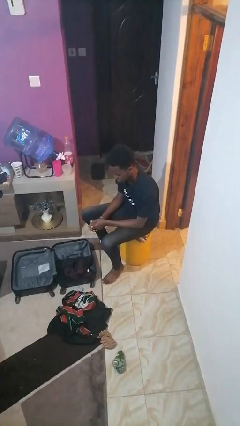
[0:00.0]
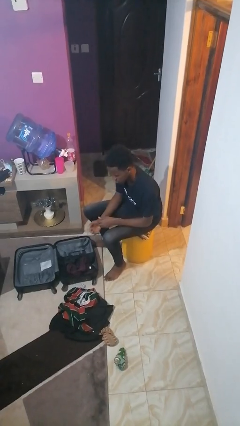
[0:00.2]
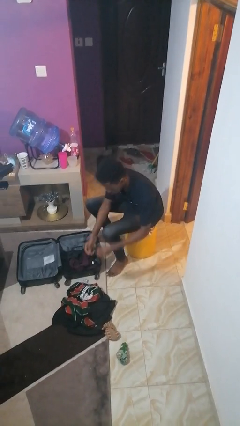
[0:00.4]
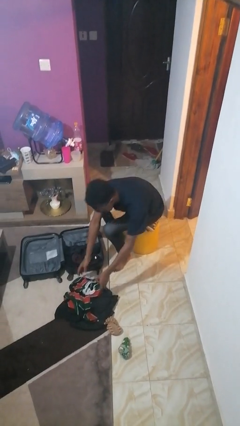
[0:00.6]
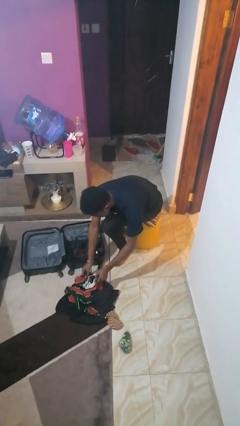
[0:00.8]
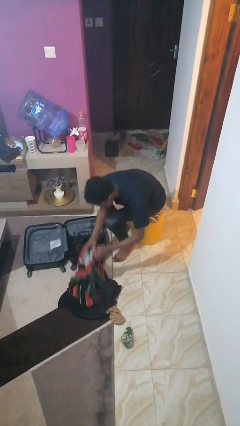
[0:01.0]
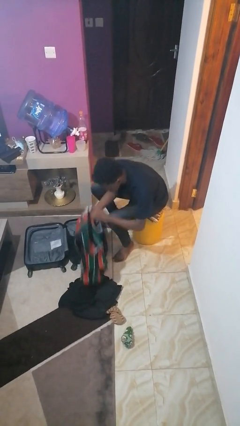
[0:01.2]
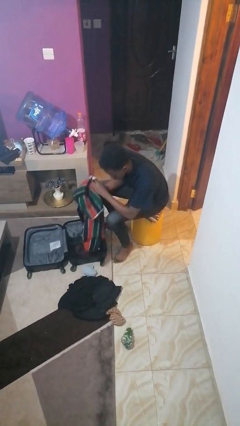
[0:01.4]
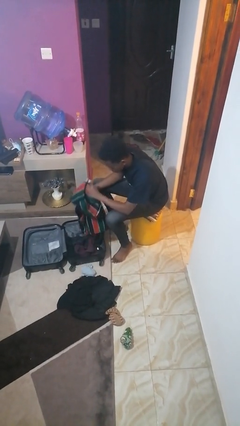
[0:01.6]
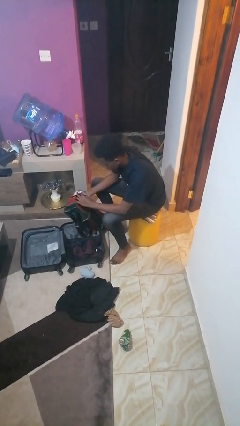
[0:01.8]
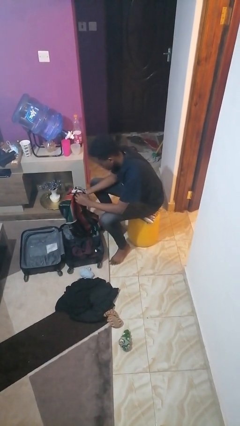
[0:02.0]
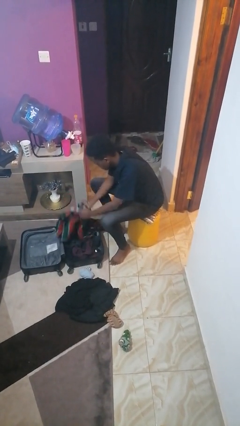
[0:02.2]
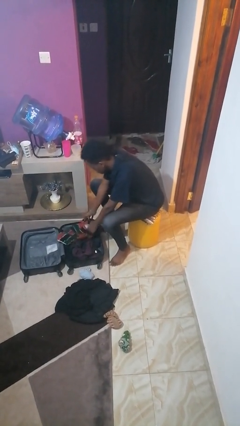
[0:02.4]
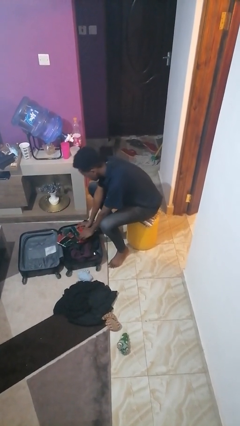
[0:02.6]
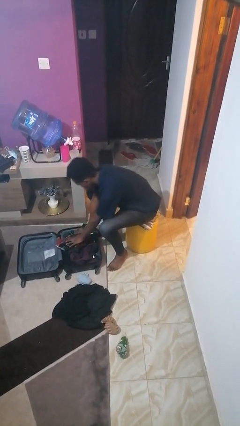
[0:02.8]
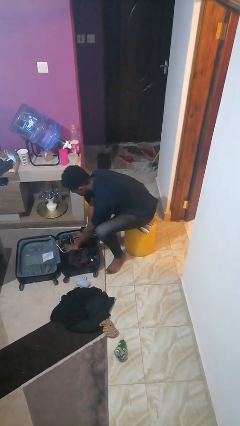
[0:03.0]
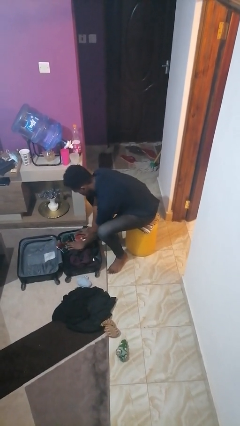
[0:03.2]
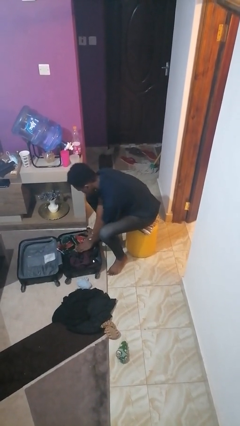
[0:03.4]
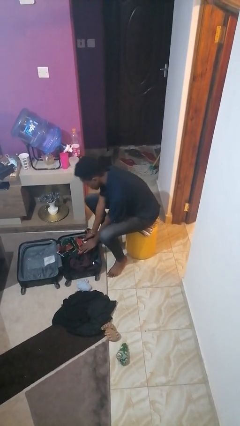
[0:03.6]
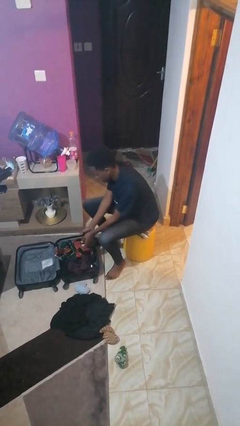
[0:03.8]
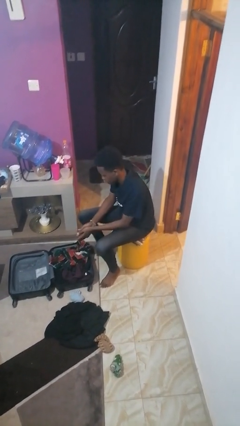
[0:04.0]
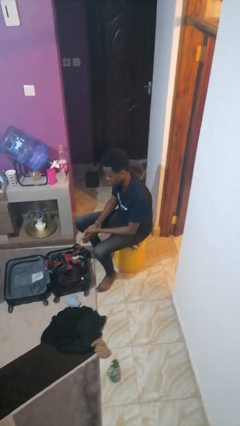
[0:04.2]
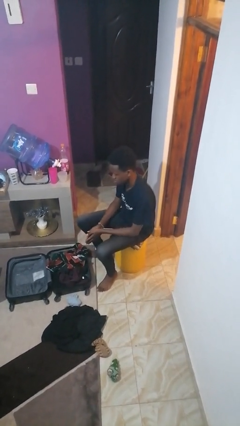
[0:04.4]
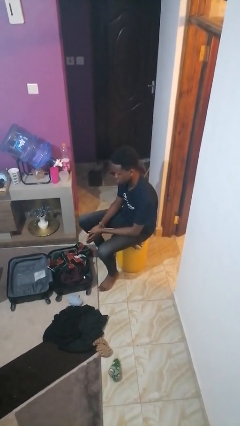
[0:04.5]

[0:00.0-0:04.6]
person loads clothes into suitcase

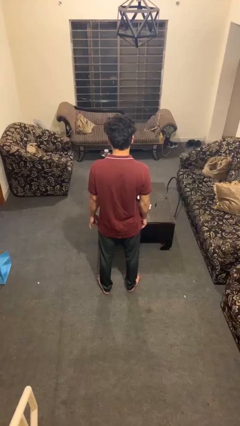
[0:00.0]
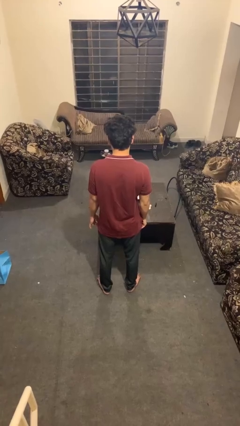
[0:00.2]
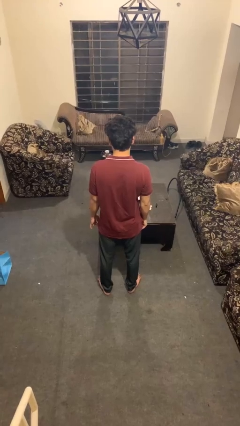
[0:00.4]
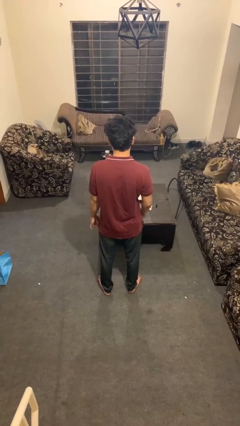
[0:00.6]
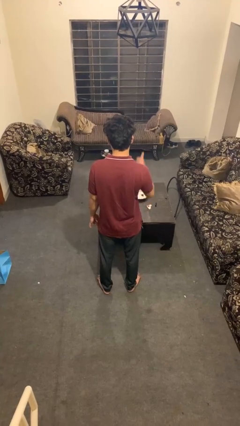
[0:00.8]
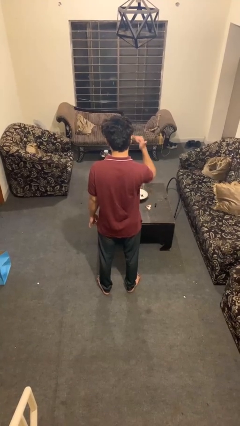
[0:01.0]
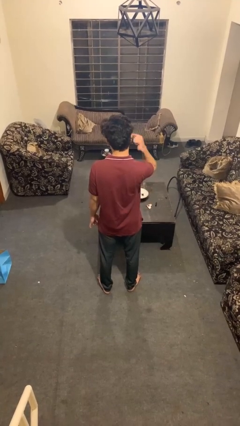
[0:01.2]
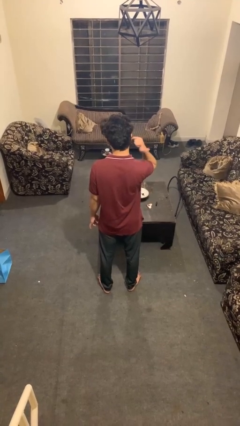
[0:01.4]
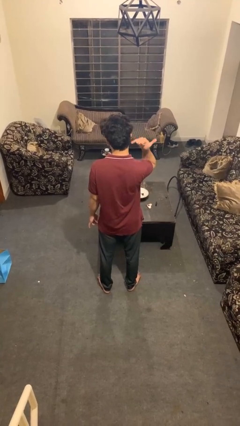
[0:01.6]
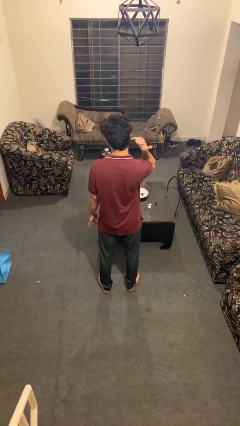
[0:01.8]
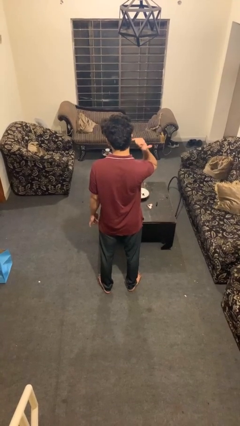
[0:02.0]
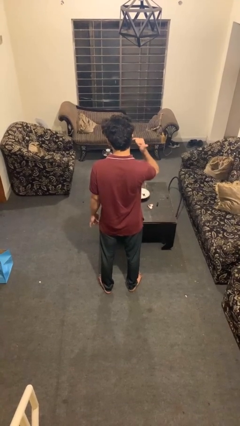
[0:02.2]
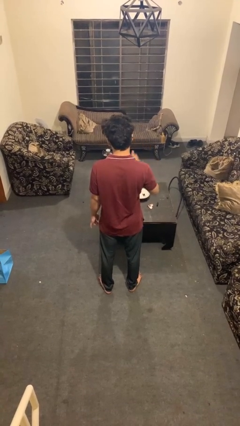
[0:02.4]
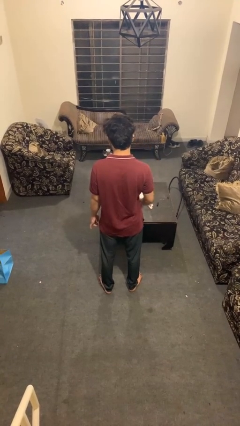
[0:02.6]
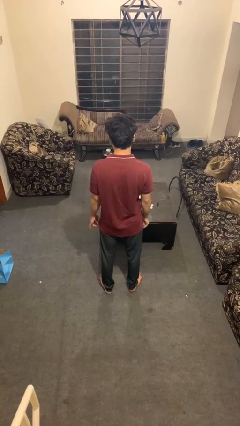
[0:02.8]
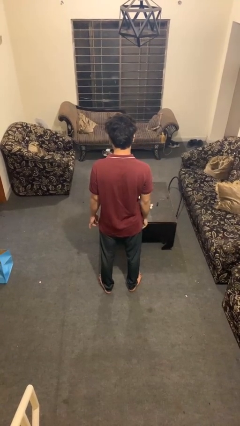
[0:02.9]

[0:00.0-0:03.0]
person gestures hang loose

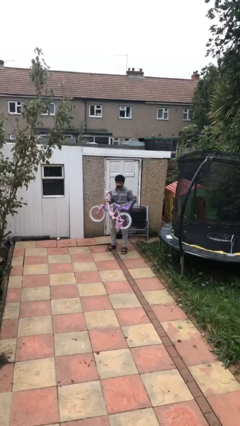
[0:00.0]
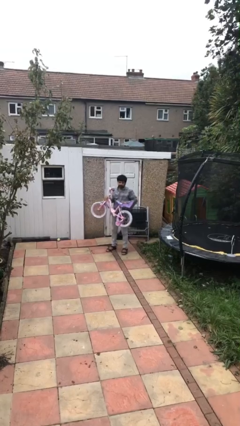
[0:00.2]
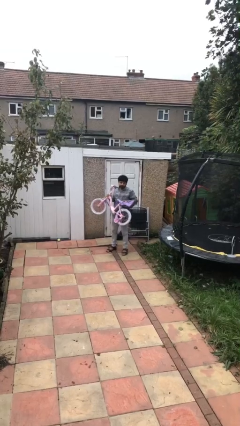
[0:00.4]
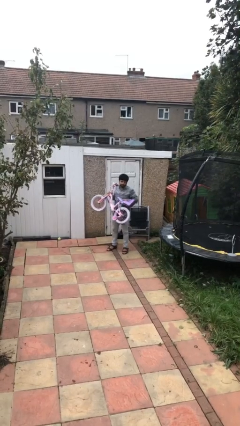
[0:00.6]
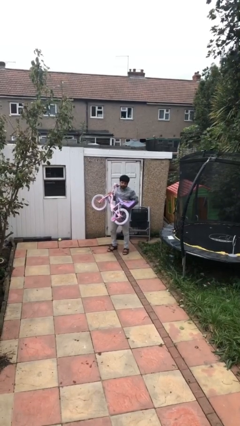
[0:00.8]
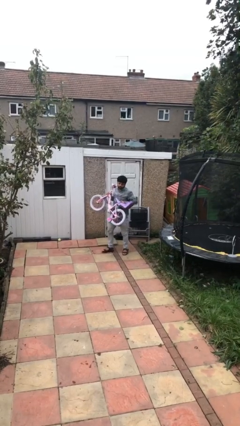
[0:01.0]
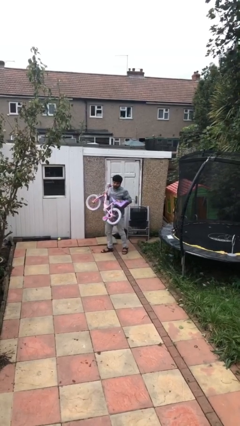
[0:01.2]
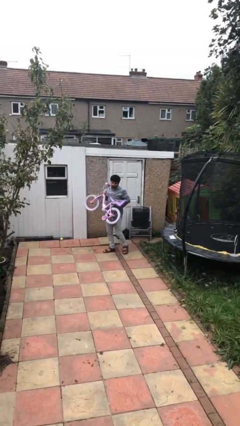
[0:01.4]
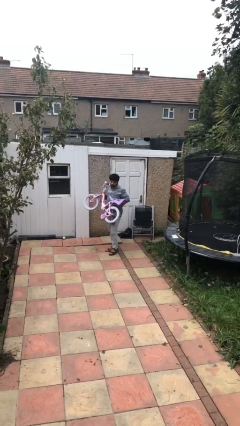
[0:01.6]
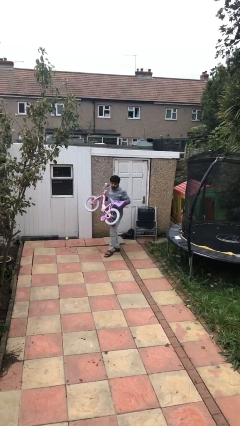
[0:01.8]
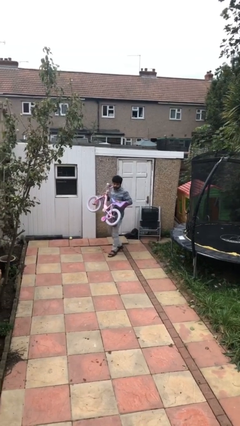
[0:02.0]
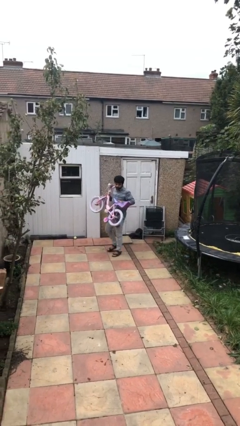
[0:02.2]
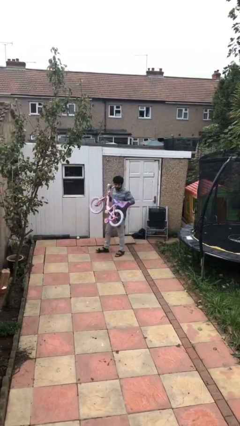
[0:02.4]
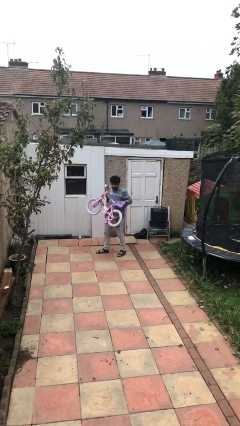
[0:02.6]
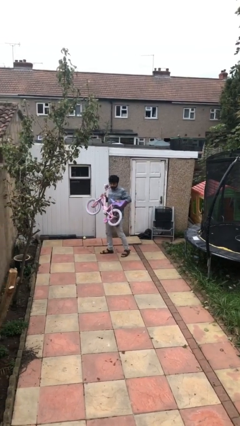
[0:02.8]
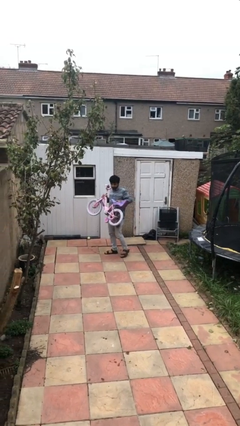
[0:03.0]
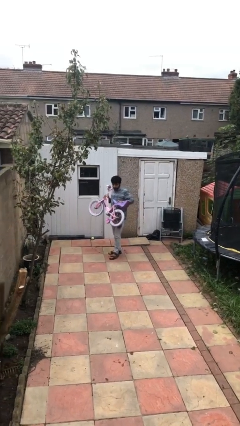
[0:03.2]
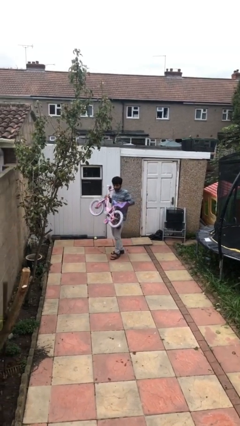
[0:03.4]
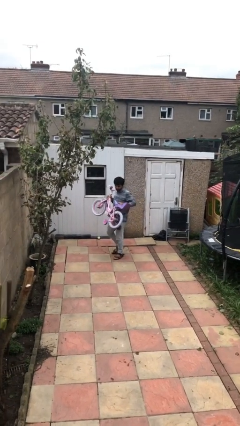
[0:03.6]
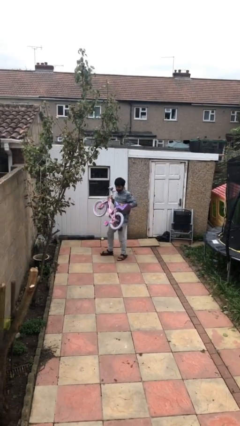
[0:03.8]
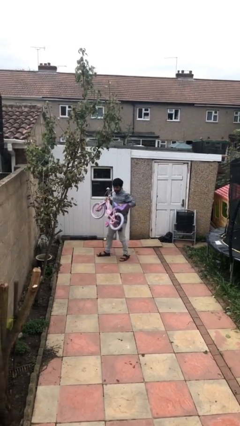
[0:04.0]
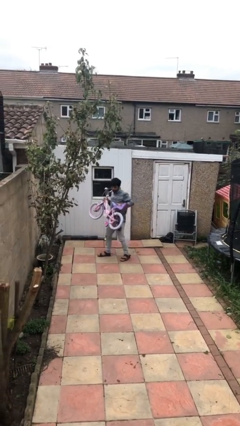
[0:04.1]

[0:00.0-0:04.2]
person carries heavy object

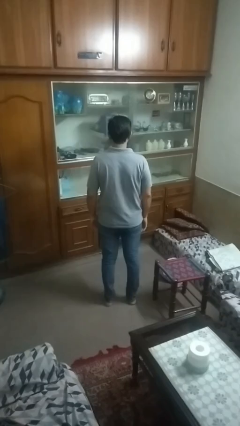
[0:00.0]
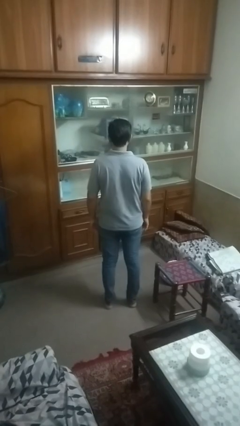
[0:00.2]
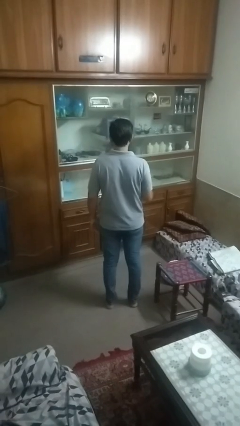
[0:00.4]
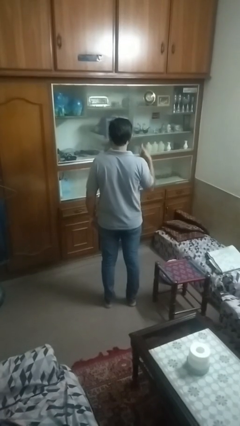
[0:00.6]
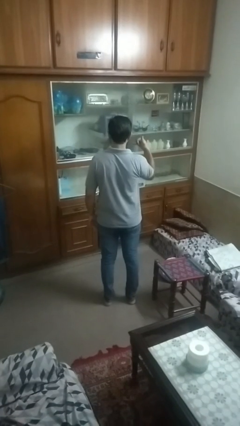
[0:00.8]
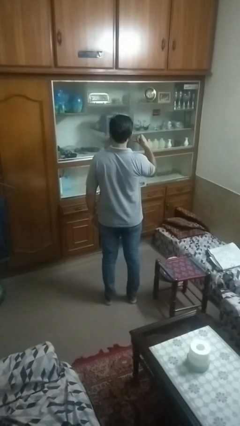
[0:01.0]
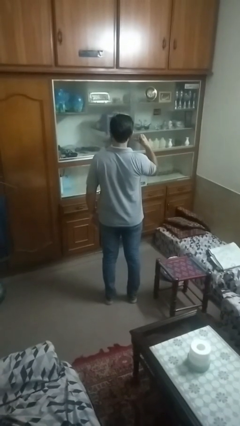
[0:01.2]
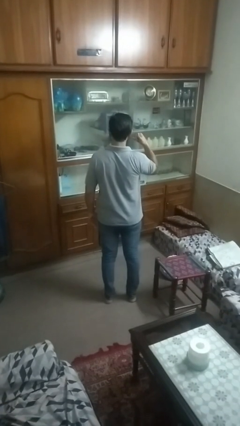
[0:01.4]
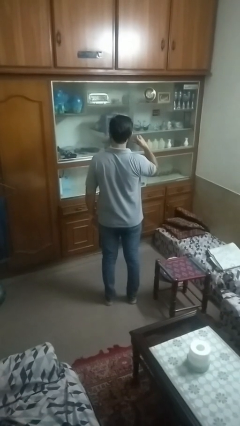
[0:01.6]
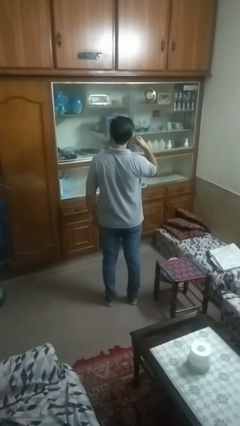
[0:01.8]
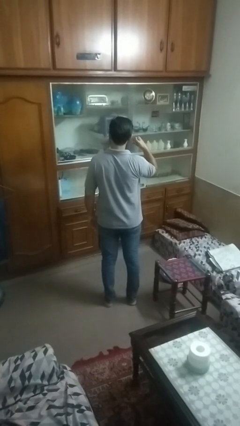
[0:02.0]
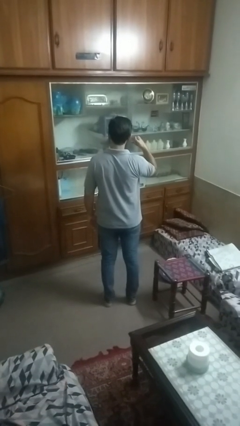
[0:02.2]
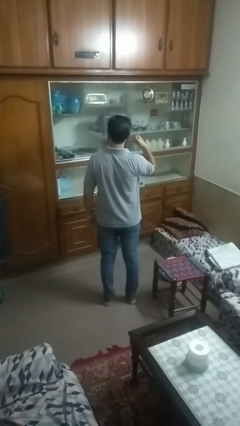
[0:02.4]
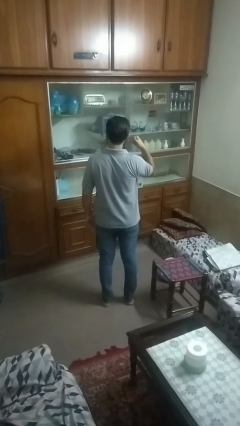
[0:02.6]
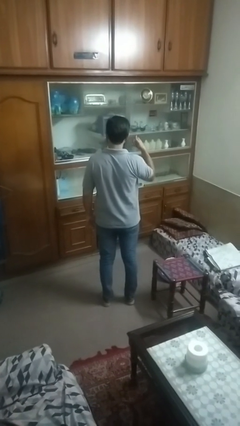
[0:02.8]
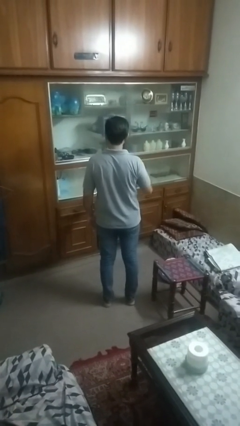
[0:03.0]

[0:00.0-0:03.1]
person gestures call me

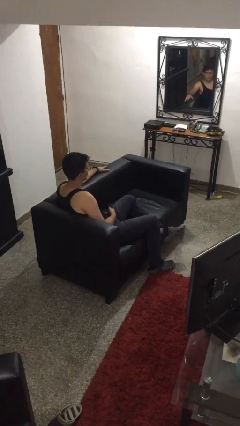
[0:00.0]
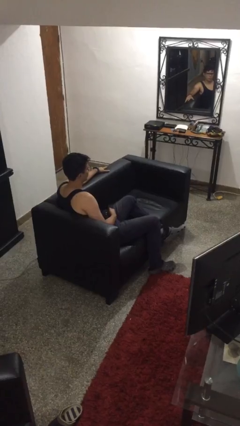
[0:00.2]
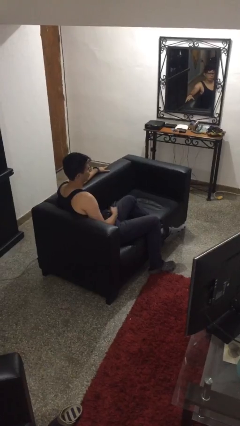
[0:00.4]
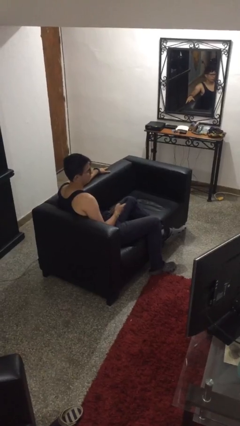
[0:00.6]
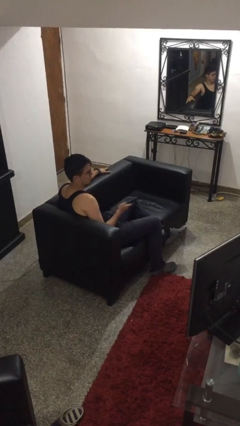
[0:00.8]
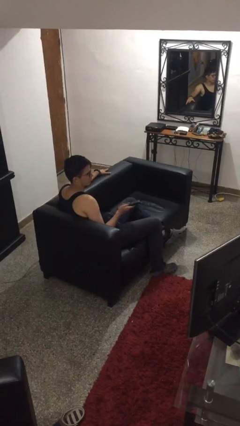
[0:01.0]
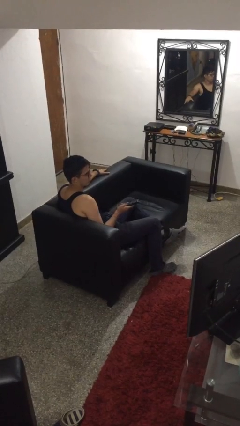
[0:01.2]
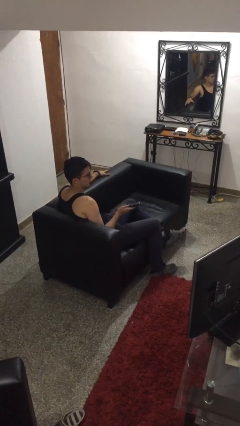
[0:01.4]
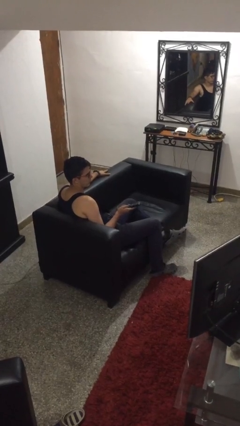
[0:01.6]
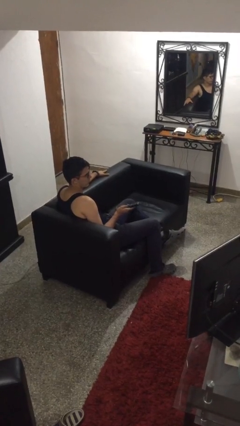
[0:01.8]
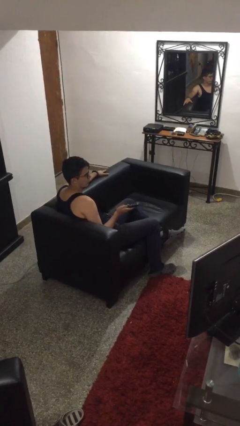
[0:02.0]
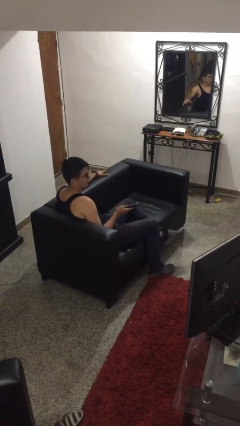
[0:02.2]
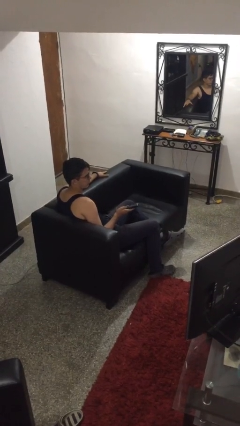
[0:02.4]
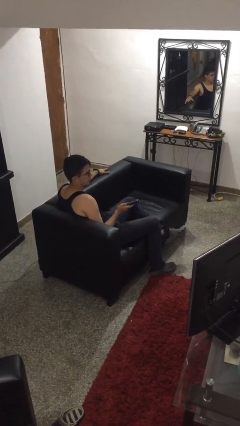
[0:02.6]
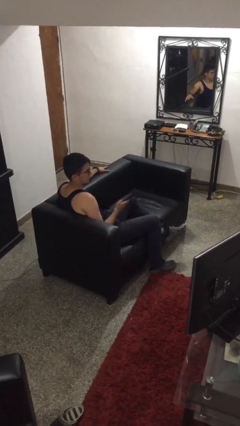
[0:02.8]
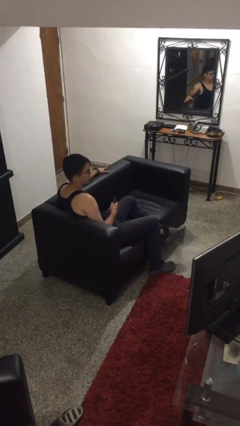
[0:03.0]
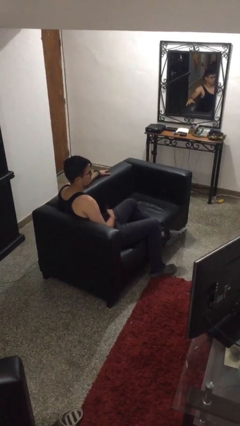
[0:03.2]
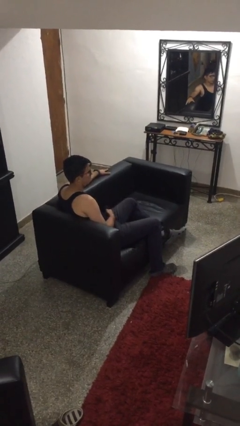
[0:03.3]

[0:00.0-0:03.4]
person uses television remote
